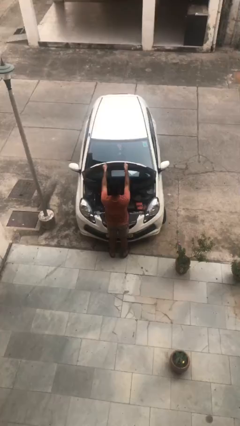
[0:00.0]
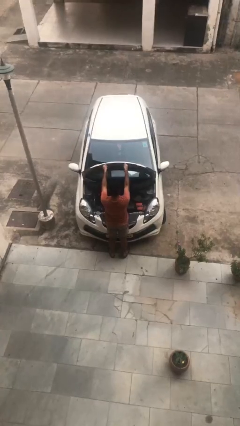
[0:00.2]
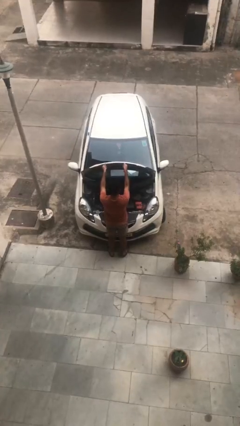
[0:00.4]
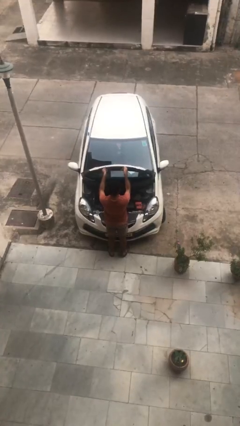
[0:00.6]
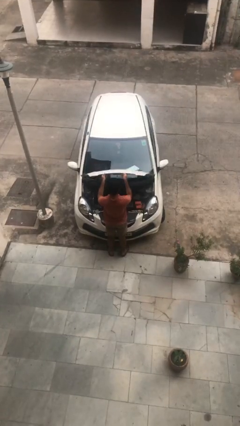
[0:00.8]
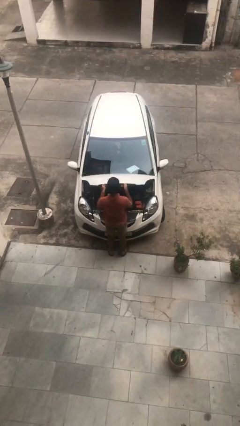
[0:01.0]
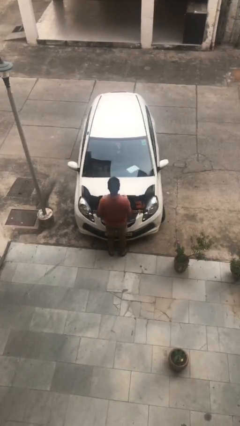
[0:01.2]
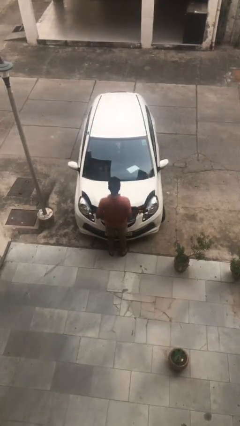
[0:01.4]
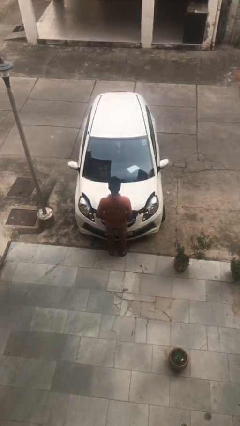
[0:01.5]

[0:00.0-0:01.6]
person closes car hood

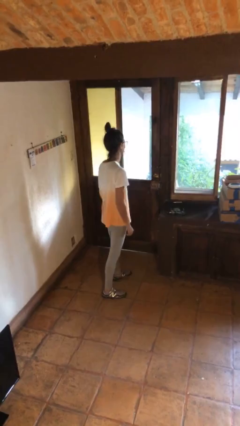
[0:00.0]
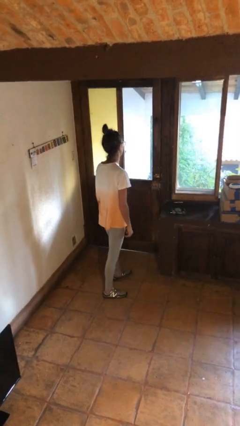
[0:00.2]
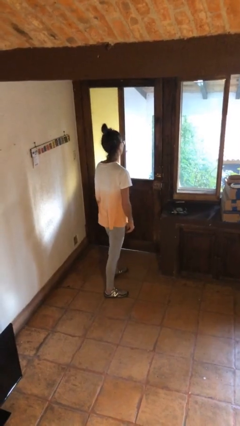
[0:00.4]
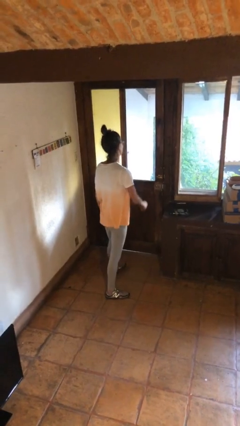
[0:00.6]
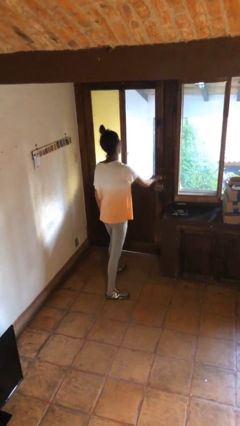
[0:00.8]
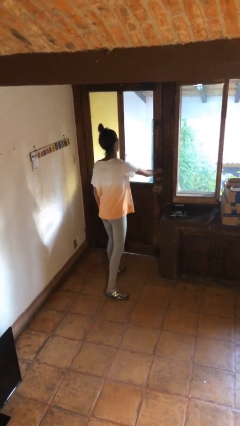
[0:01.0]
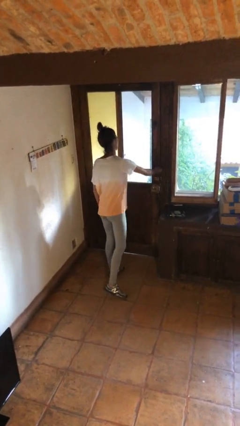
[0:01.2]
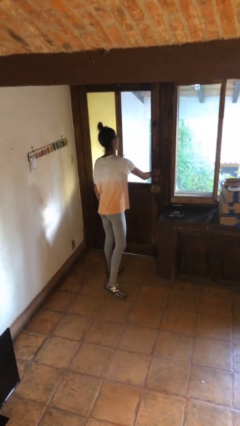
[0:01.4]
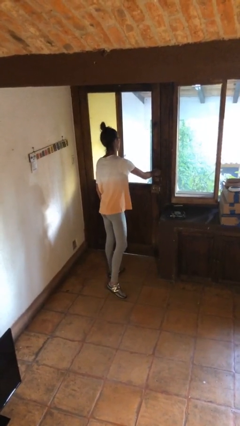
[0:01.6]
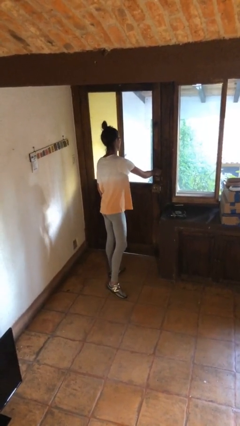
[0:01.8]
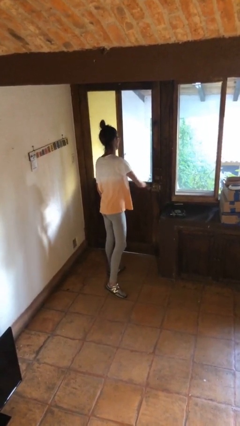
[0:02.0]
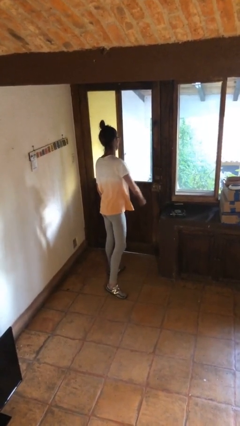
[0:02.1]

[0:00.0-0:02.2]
person locks door with keys

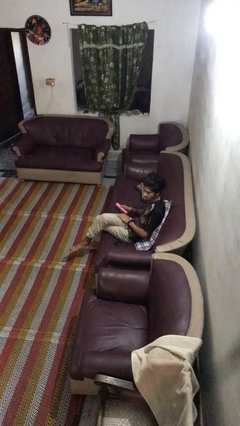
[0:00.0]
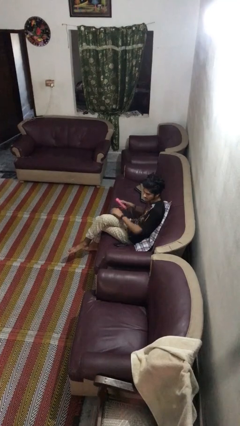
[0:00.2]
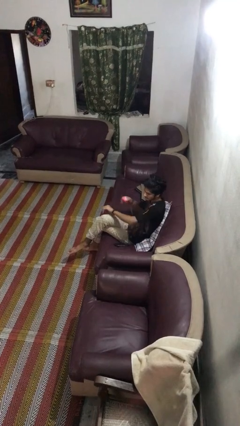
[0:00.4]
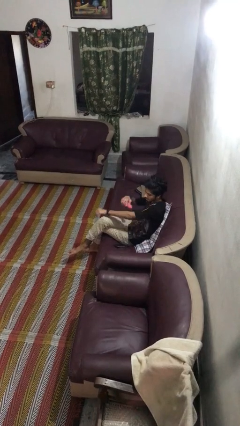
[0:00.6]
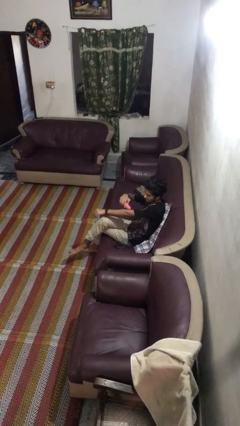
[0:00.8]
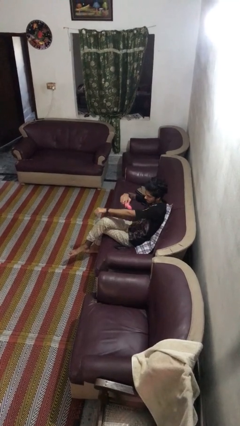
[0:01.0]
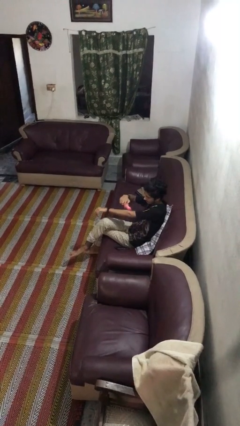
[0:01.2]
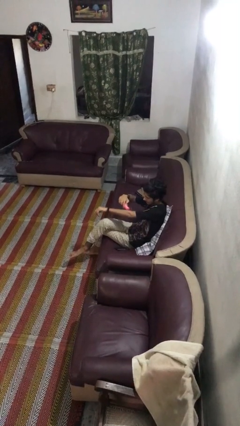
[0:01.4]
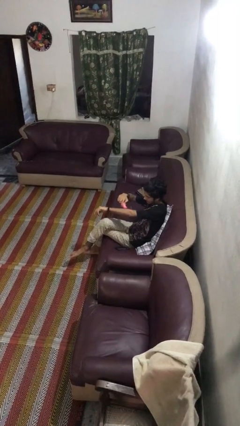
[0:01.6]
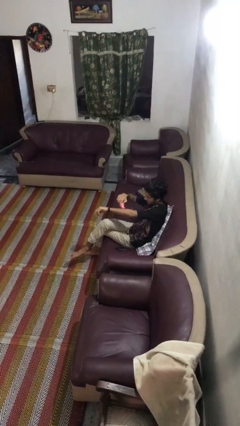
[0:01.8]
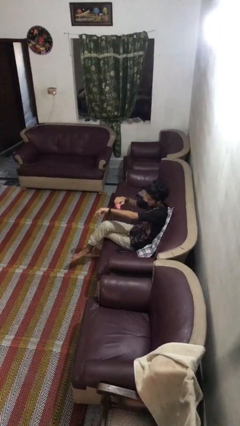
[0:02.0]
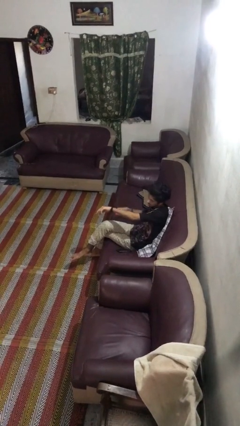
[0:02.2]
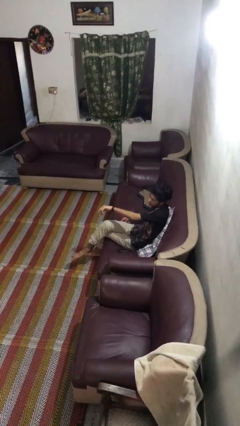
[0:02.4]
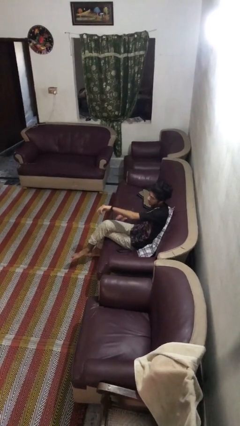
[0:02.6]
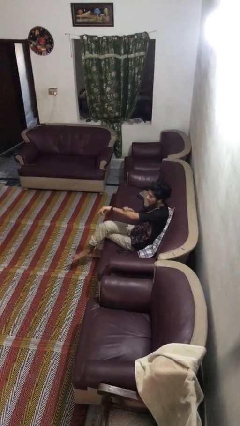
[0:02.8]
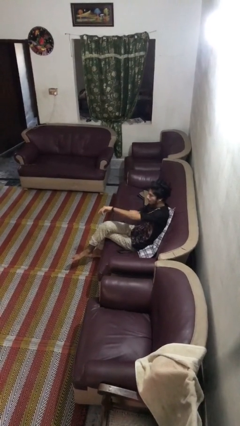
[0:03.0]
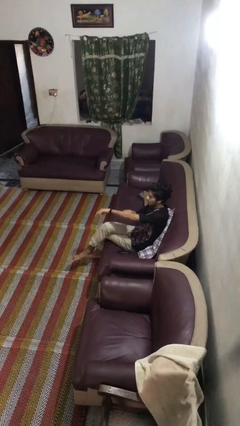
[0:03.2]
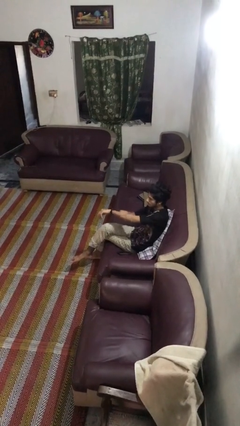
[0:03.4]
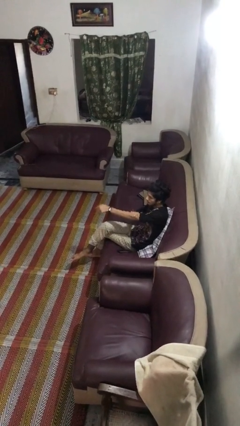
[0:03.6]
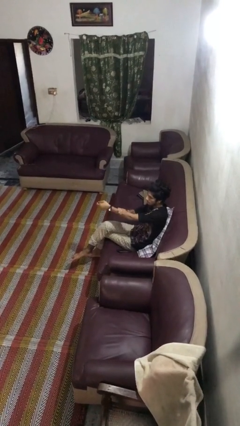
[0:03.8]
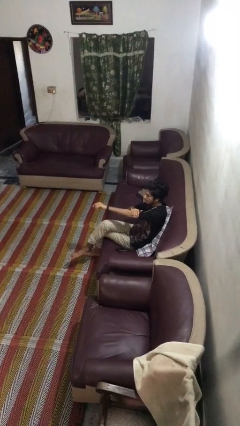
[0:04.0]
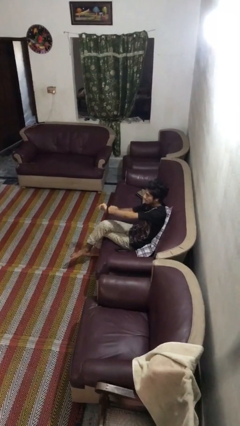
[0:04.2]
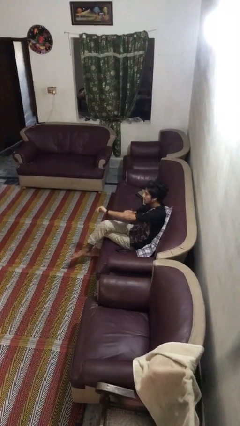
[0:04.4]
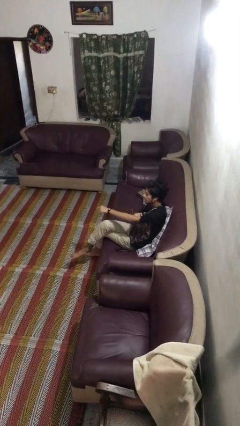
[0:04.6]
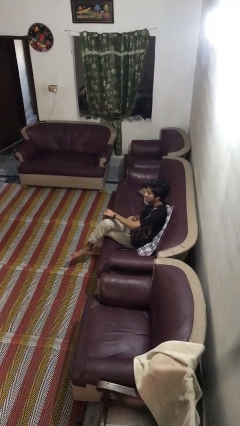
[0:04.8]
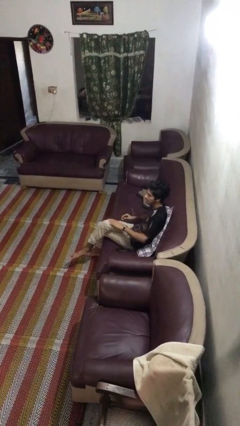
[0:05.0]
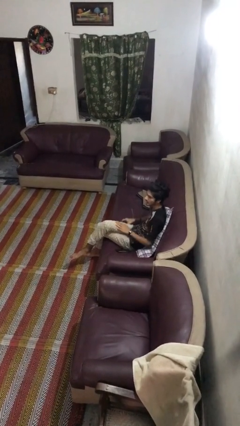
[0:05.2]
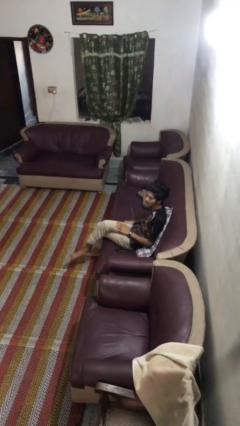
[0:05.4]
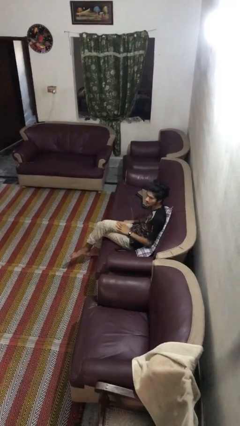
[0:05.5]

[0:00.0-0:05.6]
person applies sunscreen

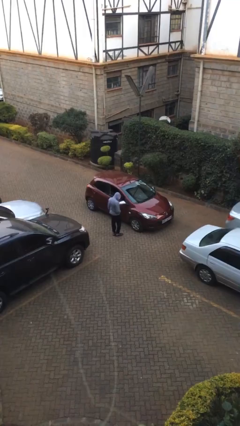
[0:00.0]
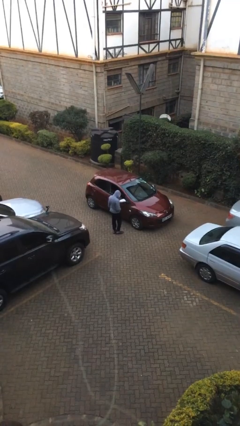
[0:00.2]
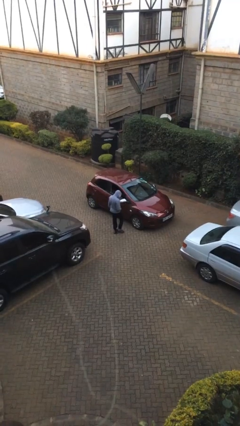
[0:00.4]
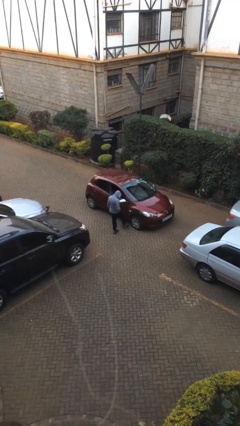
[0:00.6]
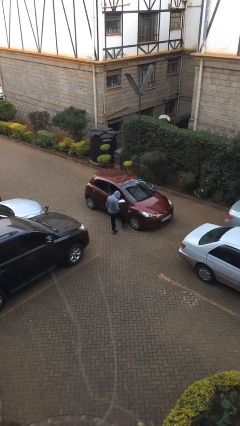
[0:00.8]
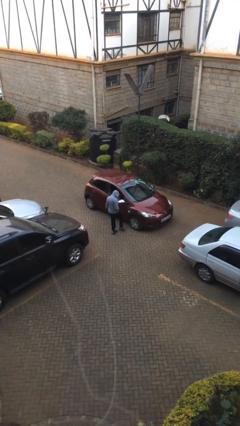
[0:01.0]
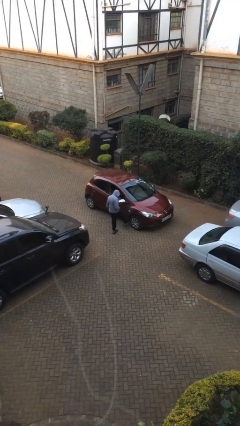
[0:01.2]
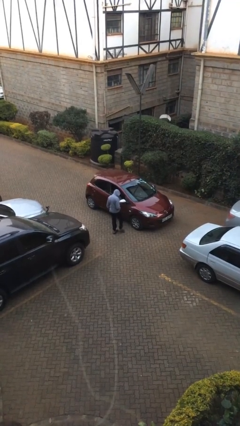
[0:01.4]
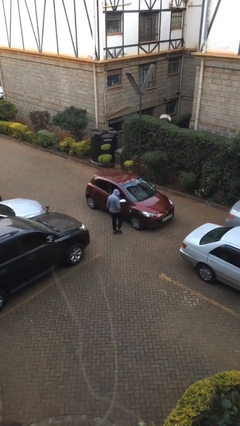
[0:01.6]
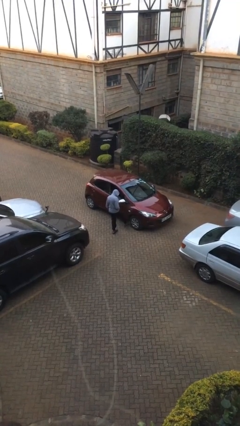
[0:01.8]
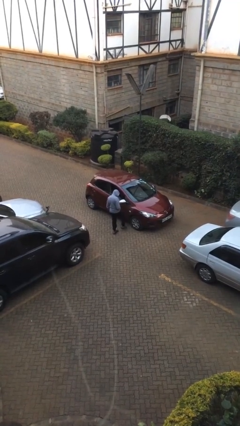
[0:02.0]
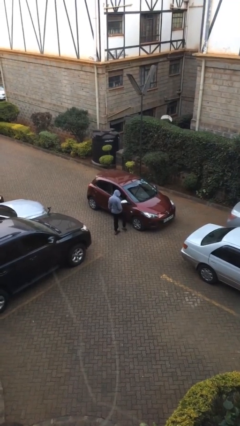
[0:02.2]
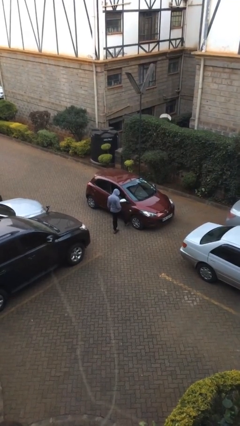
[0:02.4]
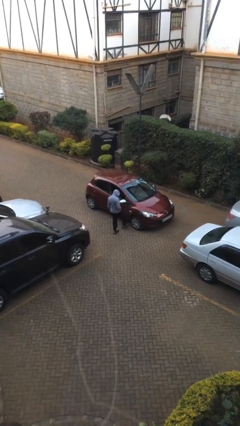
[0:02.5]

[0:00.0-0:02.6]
person kicks car tires

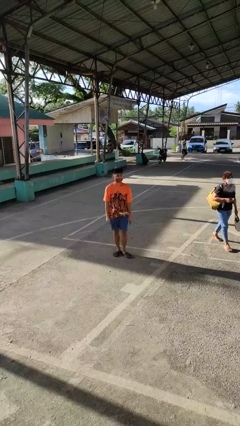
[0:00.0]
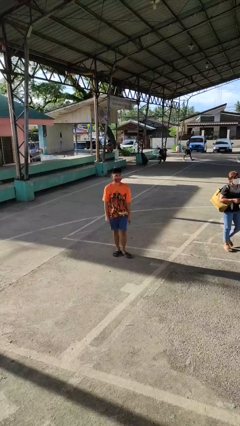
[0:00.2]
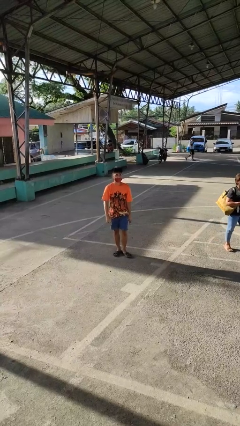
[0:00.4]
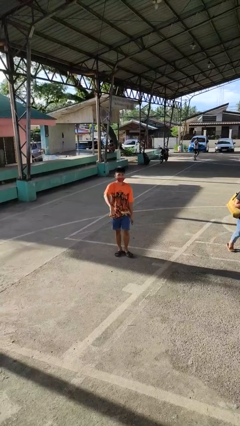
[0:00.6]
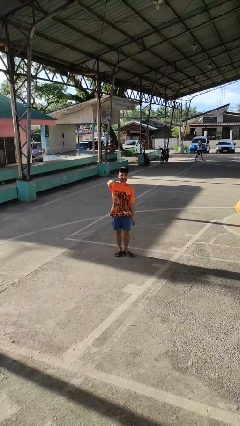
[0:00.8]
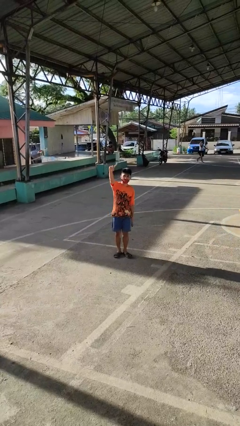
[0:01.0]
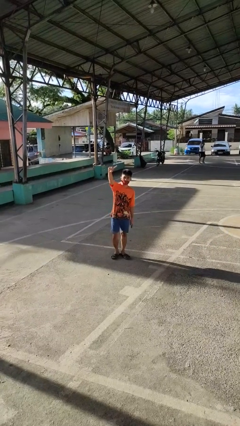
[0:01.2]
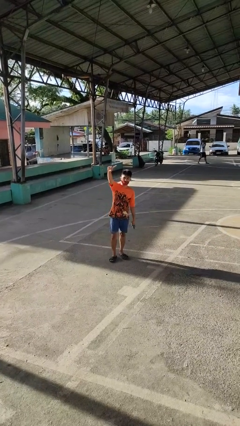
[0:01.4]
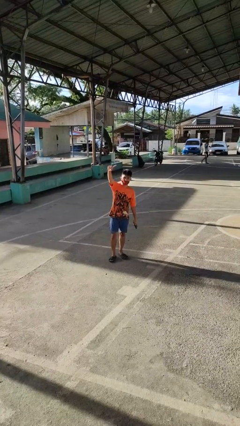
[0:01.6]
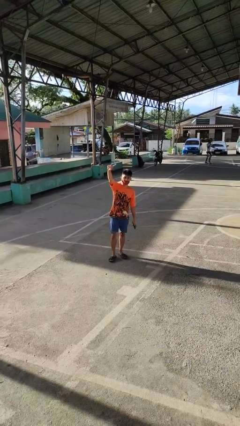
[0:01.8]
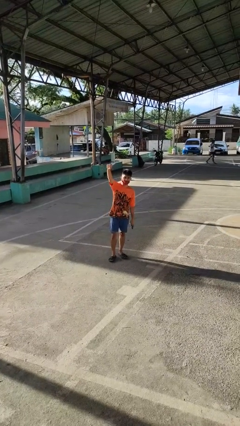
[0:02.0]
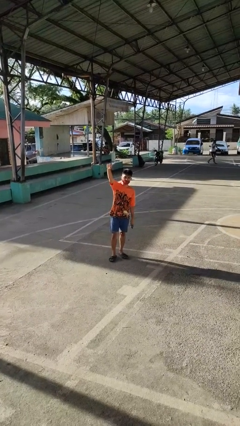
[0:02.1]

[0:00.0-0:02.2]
person gestures swipe up

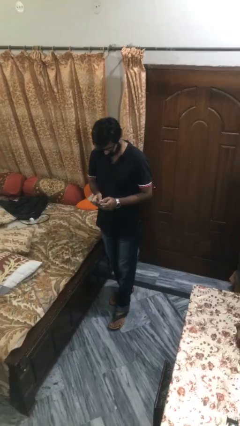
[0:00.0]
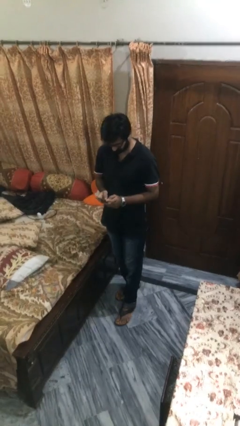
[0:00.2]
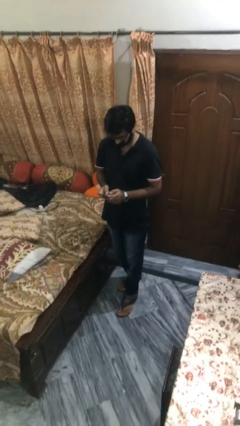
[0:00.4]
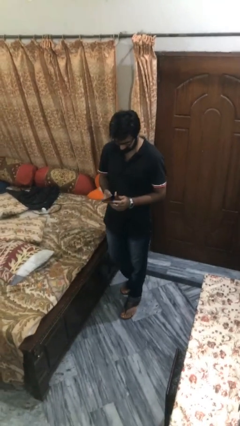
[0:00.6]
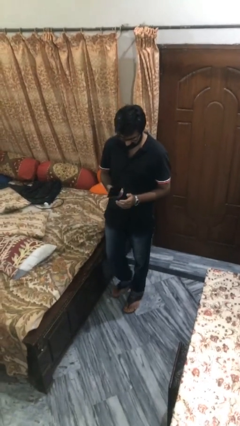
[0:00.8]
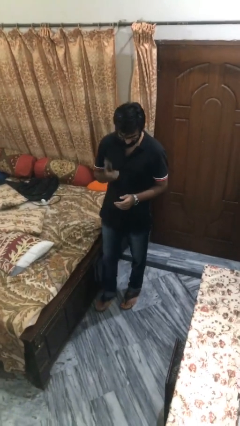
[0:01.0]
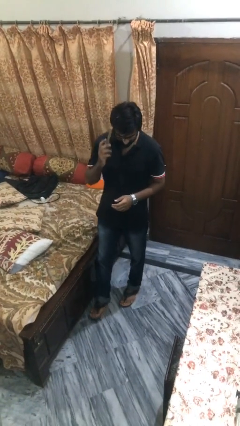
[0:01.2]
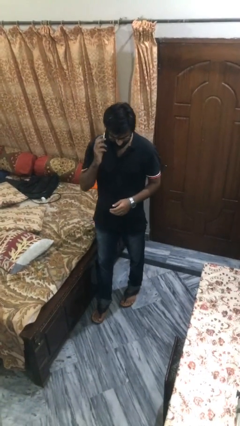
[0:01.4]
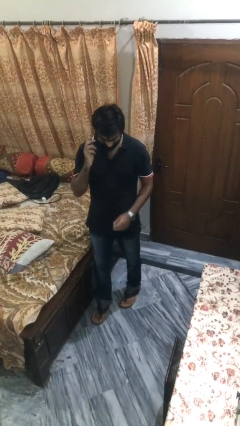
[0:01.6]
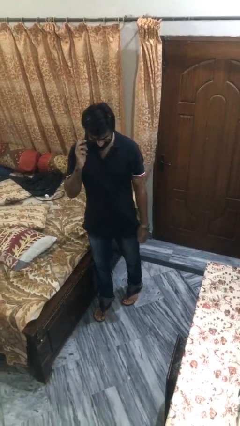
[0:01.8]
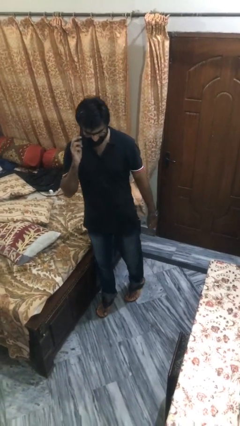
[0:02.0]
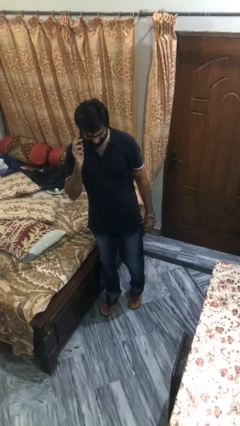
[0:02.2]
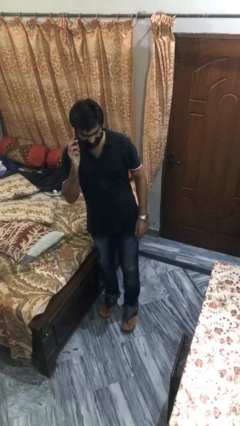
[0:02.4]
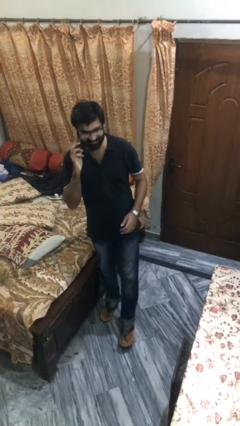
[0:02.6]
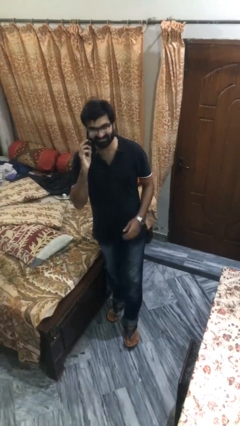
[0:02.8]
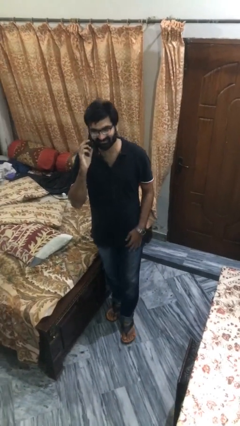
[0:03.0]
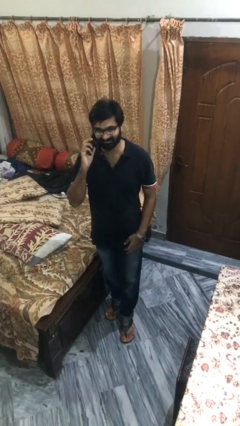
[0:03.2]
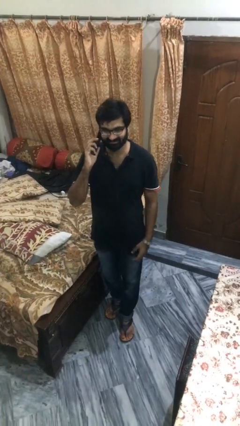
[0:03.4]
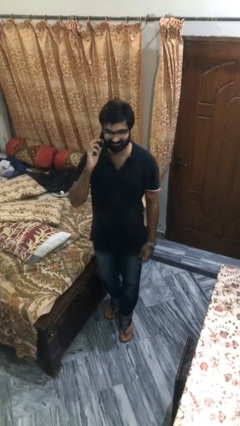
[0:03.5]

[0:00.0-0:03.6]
person talks on phone
